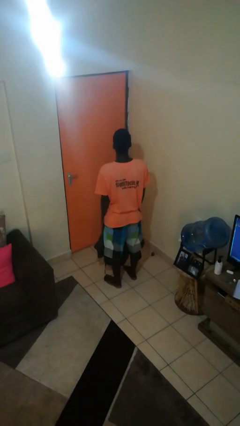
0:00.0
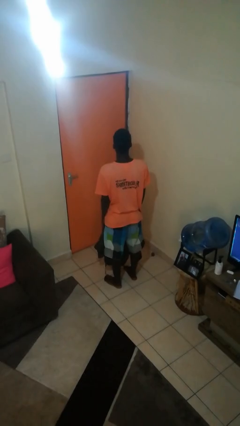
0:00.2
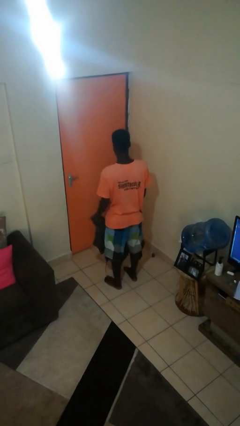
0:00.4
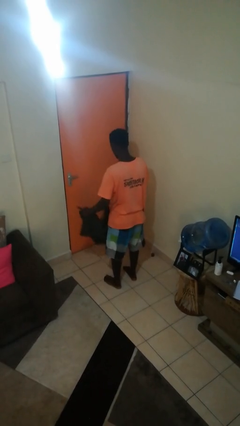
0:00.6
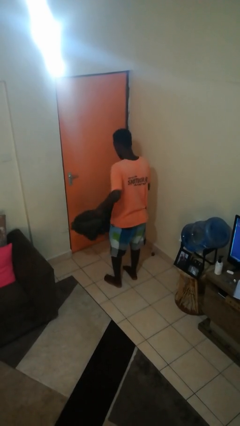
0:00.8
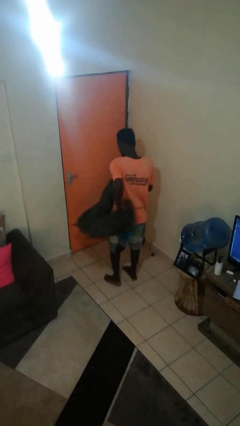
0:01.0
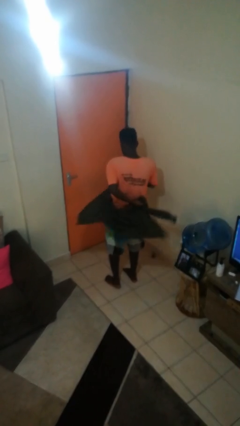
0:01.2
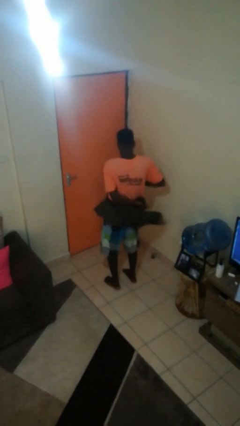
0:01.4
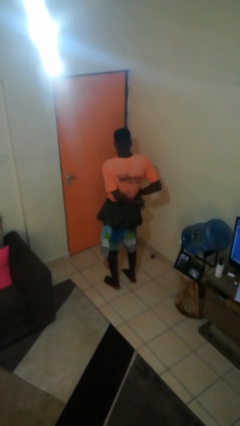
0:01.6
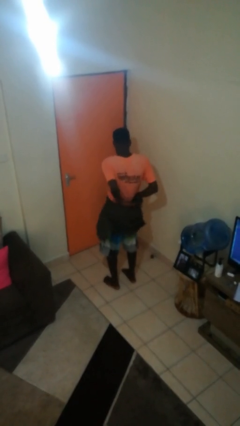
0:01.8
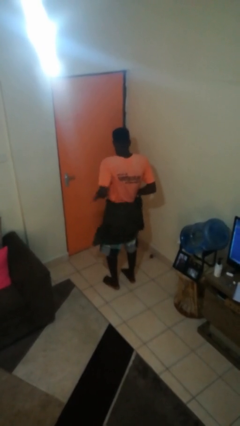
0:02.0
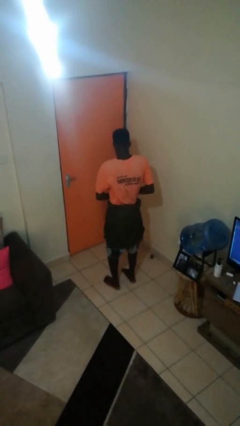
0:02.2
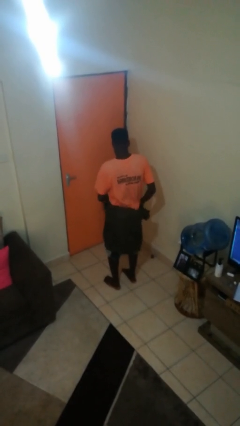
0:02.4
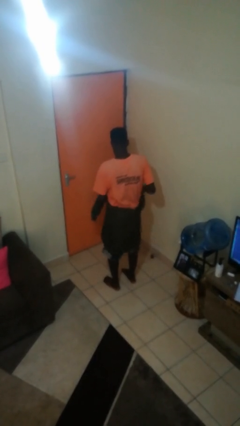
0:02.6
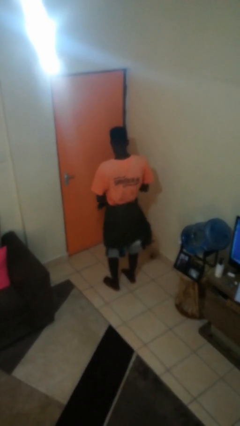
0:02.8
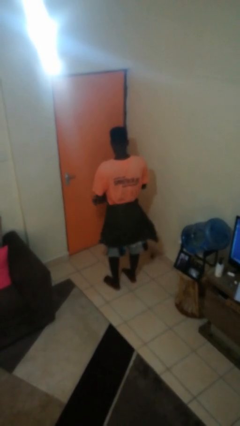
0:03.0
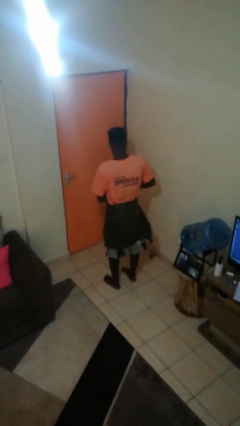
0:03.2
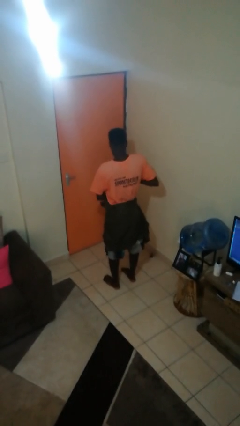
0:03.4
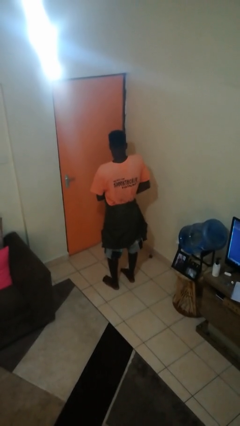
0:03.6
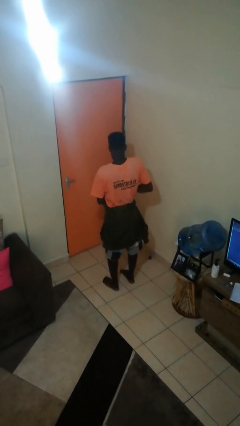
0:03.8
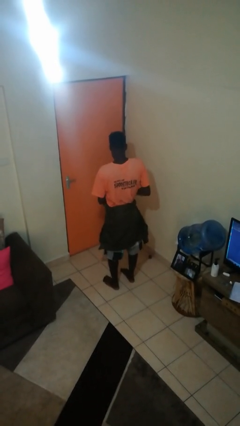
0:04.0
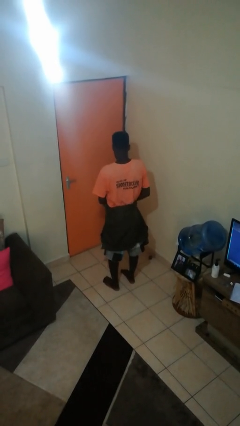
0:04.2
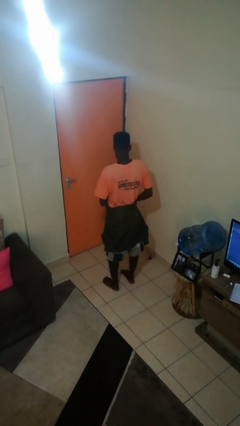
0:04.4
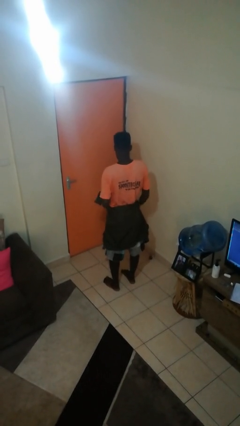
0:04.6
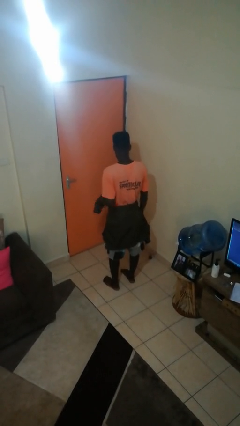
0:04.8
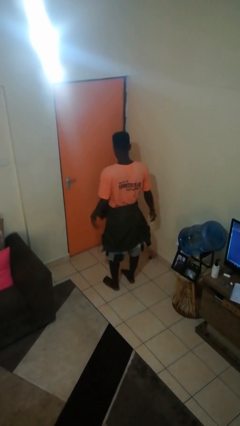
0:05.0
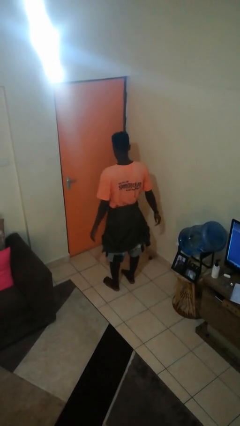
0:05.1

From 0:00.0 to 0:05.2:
person ties jacket around waist

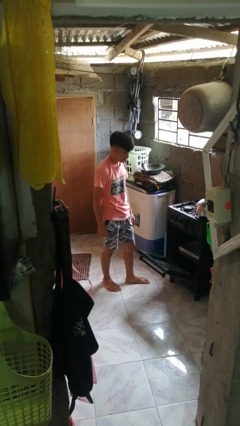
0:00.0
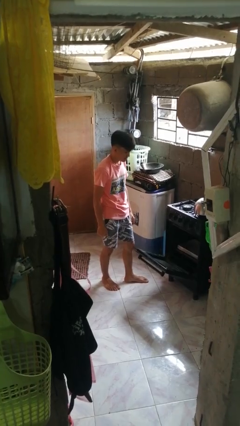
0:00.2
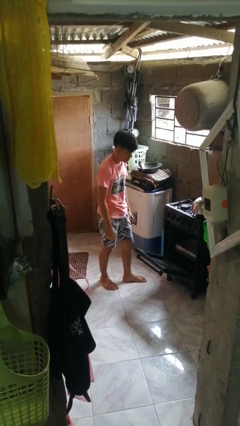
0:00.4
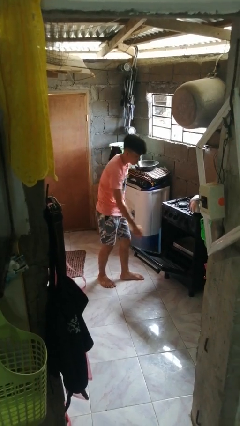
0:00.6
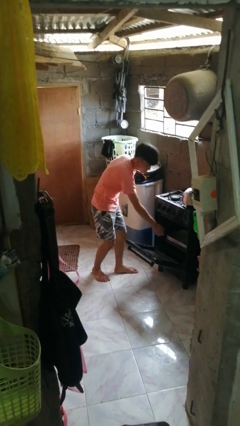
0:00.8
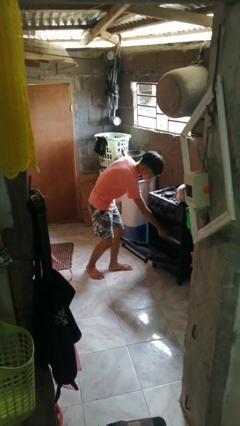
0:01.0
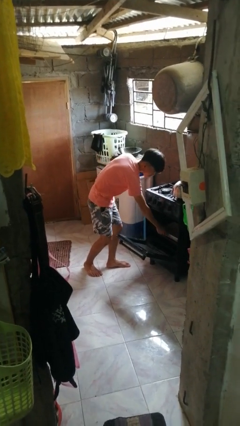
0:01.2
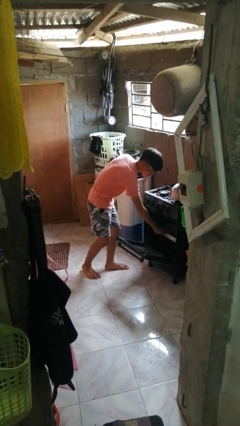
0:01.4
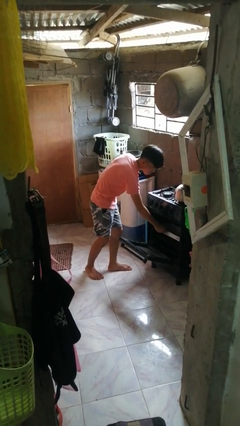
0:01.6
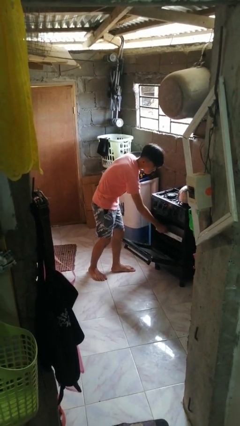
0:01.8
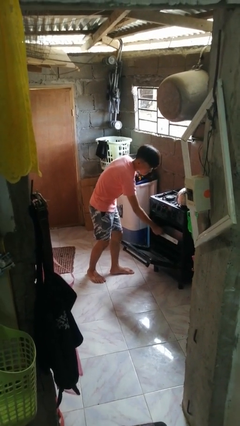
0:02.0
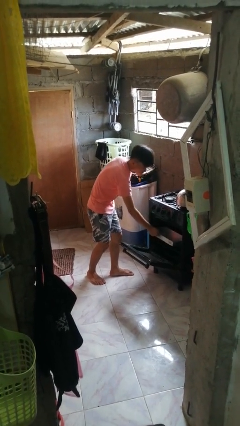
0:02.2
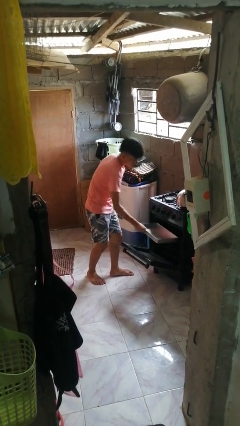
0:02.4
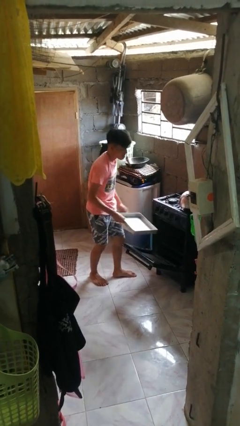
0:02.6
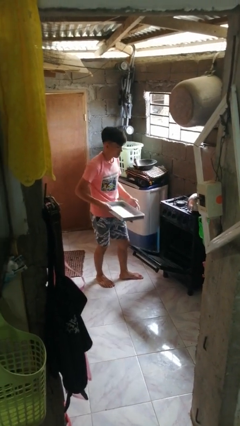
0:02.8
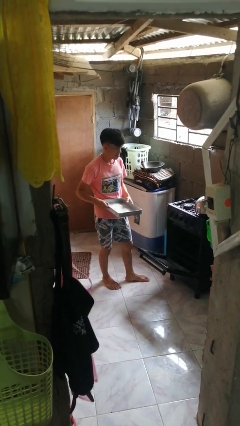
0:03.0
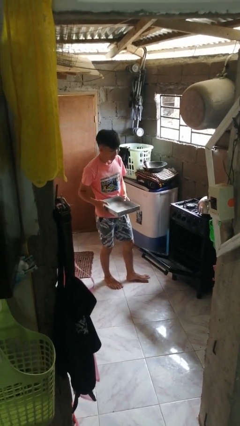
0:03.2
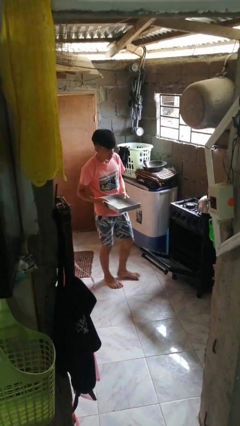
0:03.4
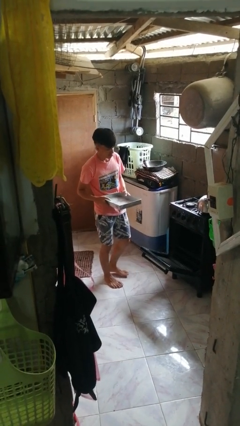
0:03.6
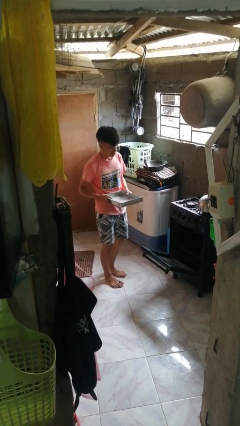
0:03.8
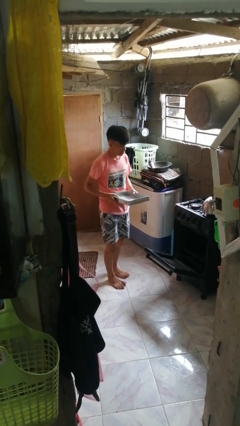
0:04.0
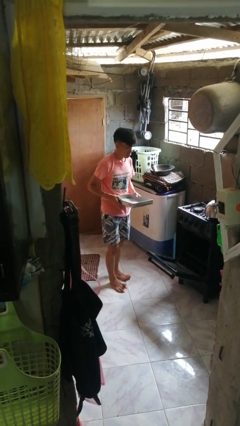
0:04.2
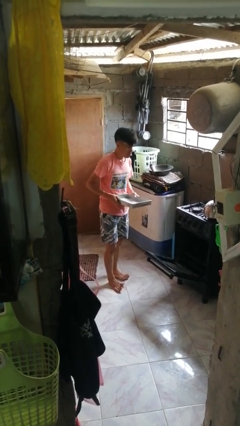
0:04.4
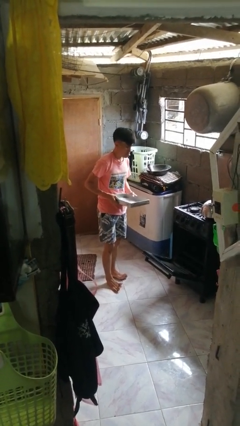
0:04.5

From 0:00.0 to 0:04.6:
person takes object from oven

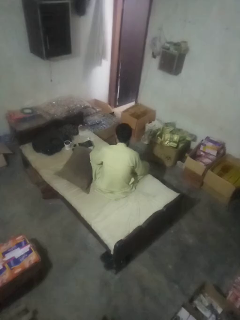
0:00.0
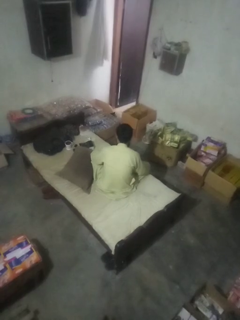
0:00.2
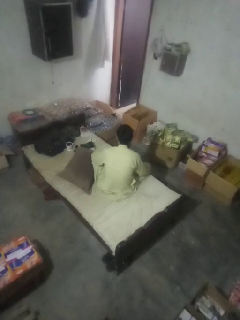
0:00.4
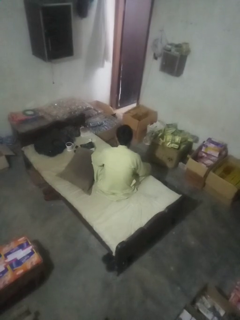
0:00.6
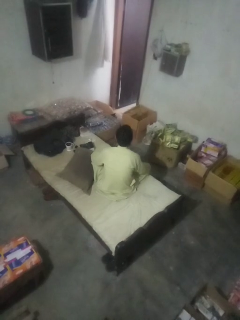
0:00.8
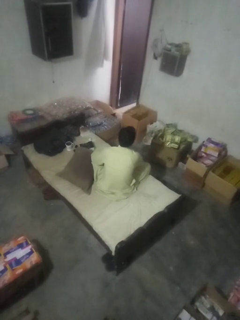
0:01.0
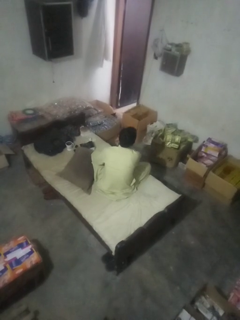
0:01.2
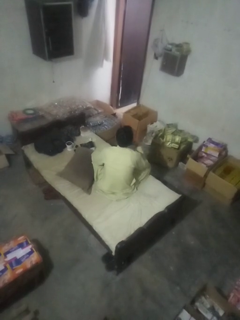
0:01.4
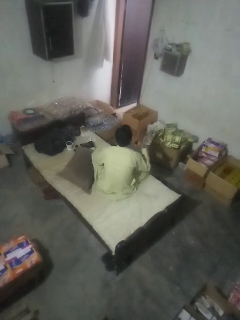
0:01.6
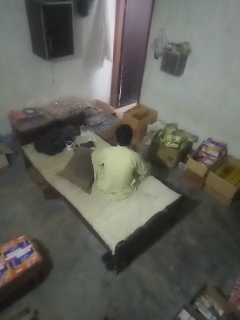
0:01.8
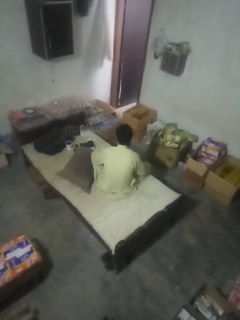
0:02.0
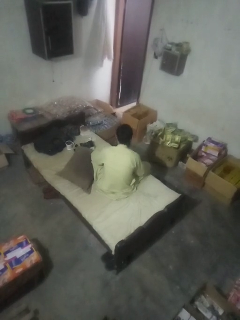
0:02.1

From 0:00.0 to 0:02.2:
person gestures cut

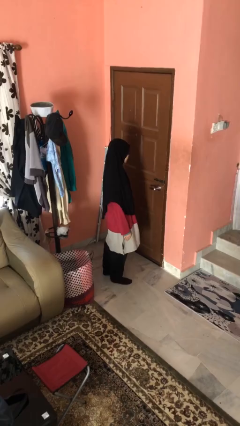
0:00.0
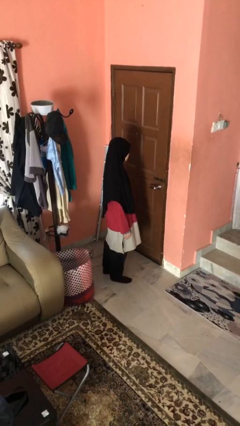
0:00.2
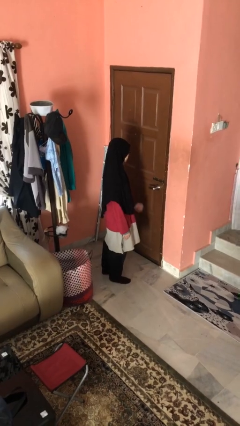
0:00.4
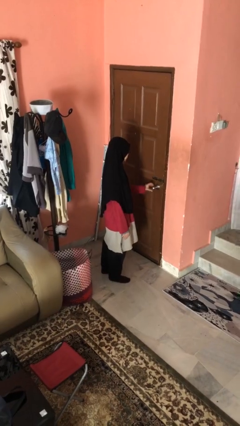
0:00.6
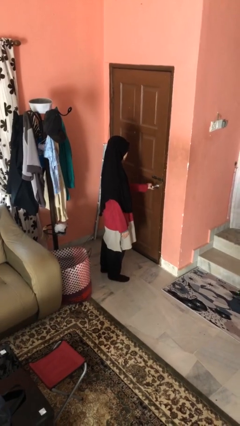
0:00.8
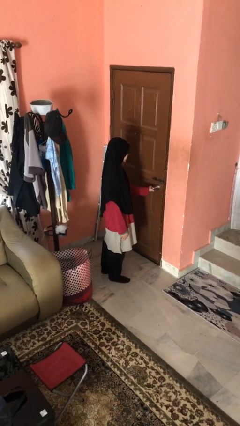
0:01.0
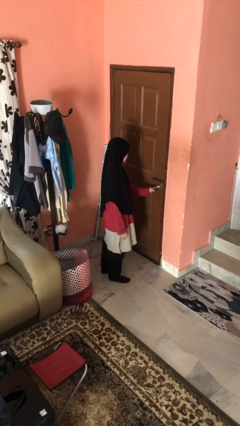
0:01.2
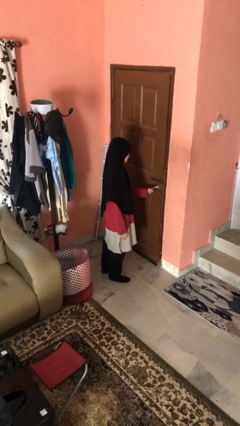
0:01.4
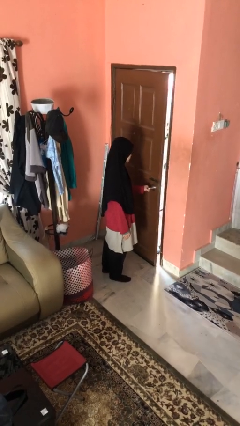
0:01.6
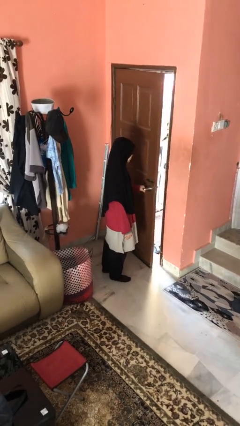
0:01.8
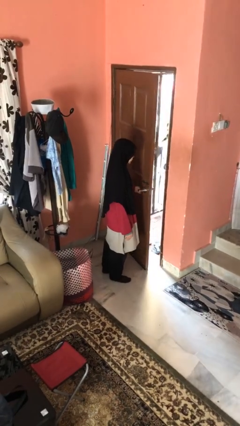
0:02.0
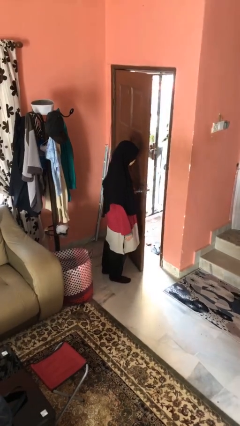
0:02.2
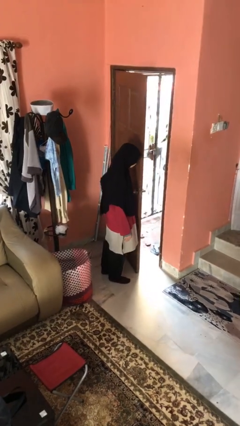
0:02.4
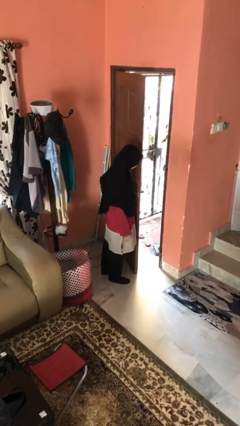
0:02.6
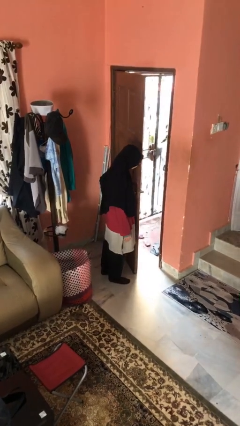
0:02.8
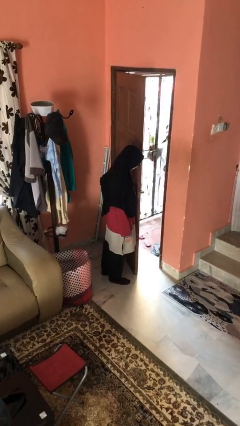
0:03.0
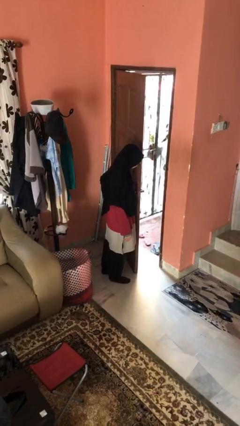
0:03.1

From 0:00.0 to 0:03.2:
person opens facility door

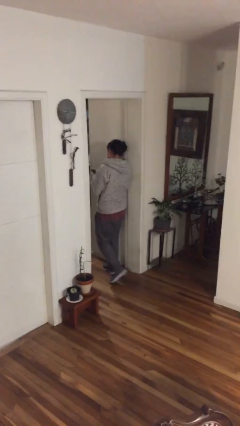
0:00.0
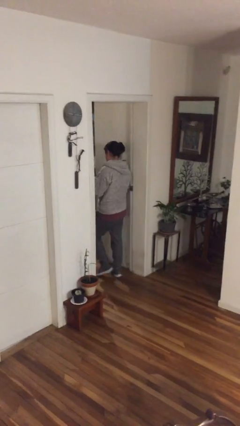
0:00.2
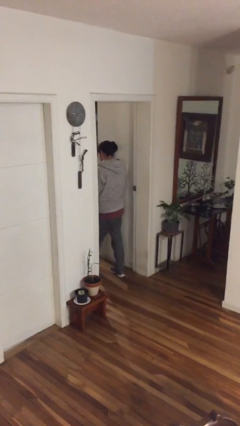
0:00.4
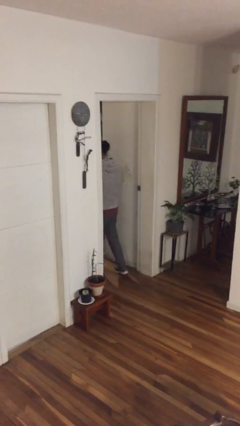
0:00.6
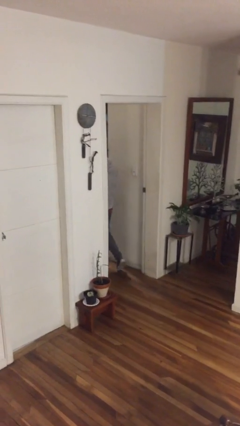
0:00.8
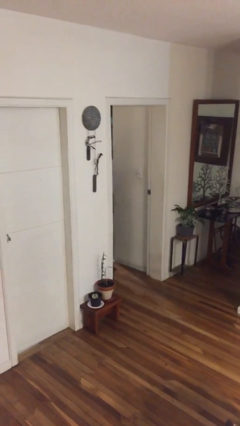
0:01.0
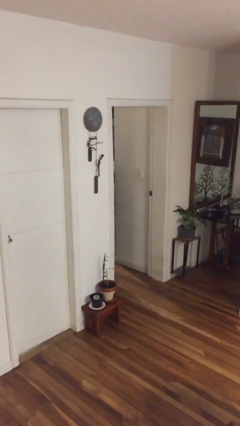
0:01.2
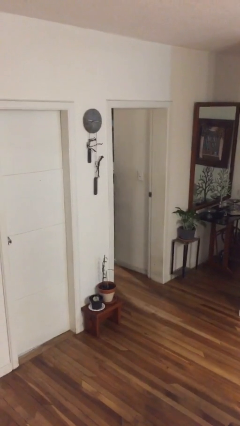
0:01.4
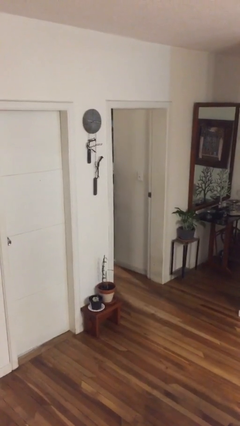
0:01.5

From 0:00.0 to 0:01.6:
person exits scene through structure

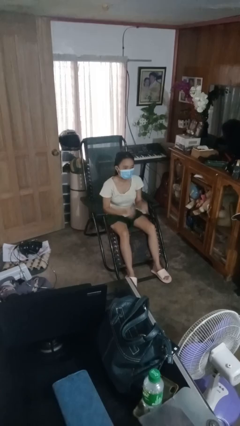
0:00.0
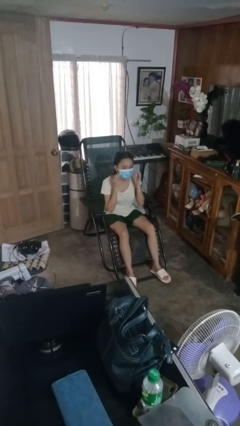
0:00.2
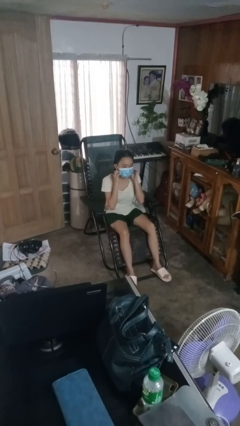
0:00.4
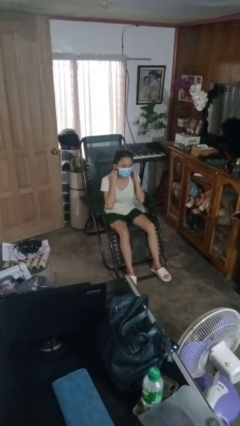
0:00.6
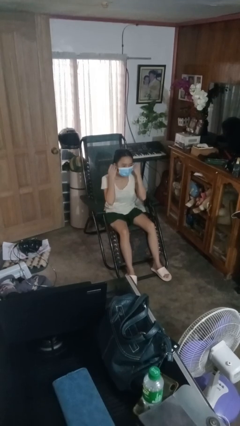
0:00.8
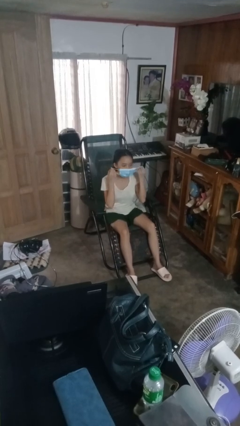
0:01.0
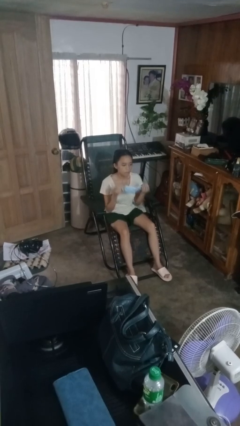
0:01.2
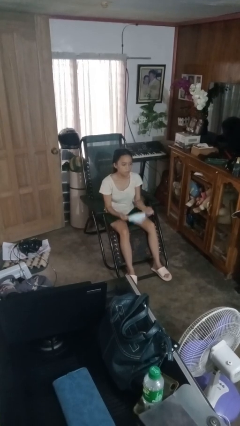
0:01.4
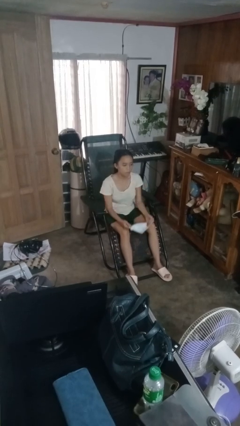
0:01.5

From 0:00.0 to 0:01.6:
person takes off facemask
